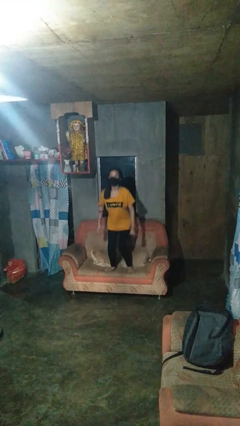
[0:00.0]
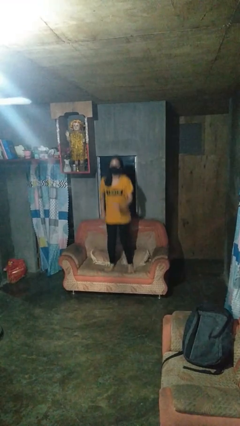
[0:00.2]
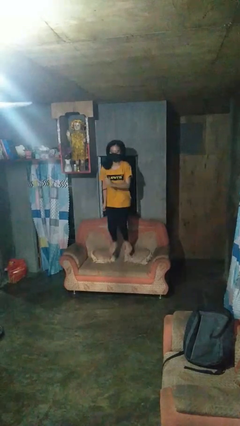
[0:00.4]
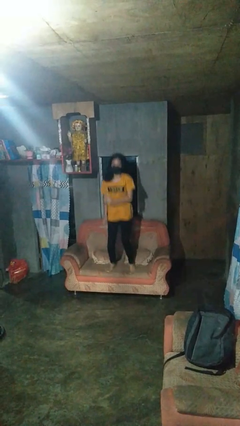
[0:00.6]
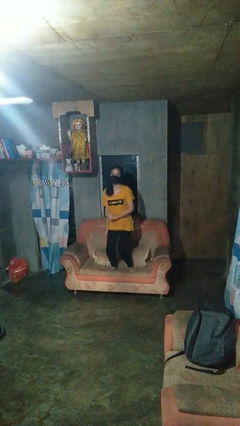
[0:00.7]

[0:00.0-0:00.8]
person jumps on couch

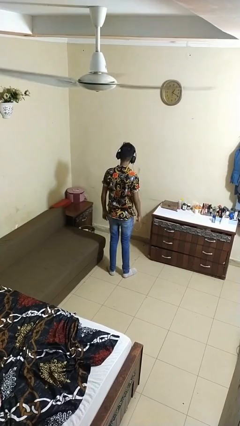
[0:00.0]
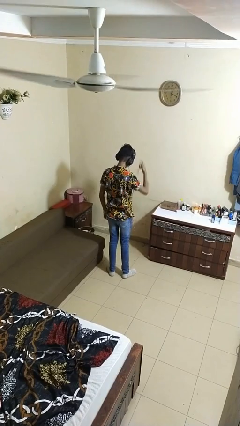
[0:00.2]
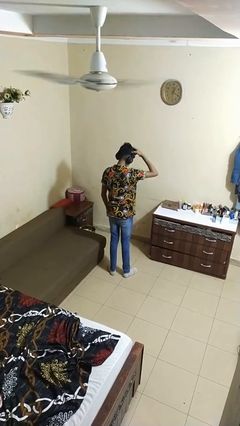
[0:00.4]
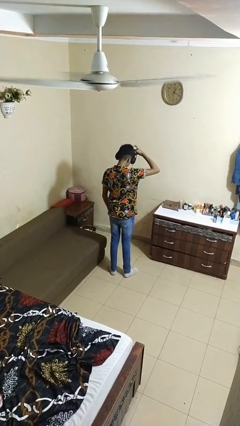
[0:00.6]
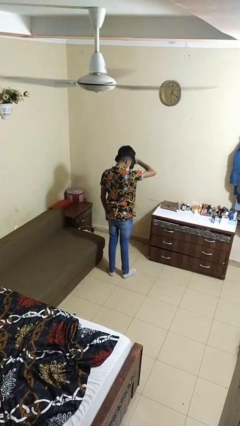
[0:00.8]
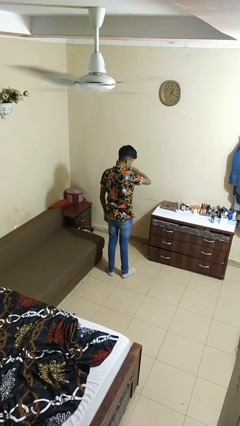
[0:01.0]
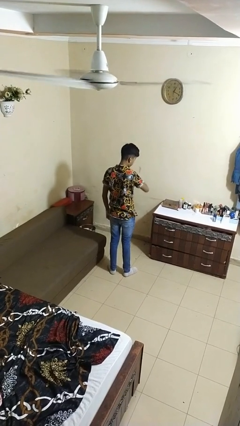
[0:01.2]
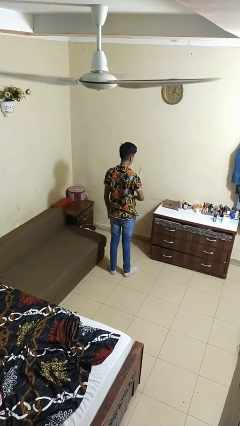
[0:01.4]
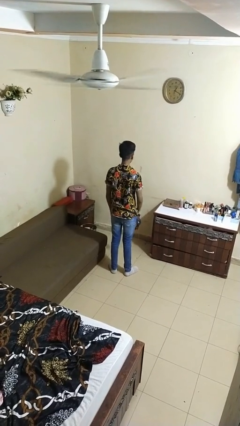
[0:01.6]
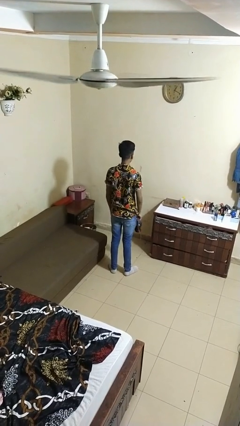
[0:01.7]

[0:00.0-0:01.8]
person takes off headphones

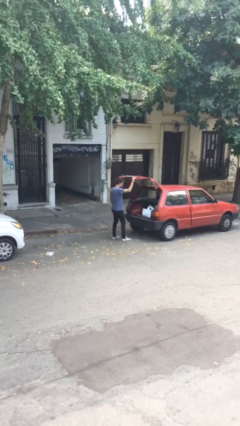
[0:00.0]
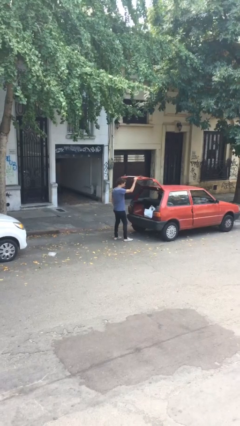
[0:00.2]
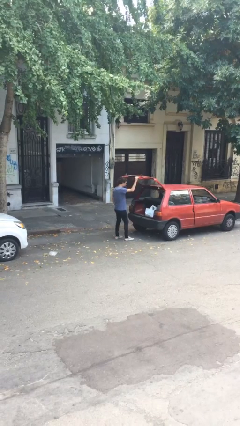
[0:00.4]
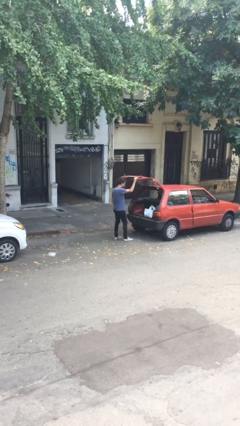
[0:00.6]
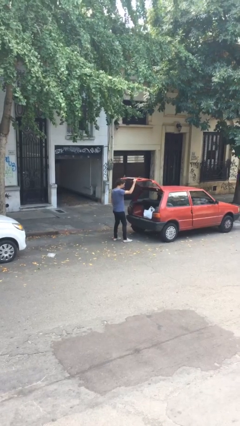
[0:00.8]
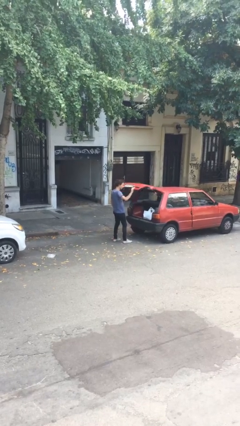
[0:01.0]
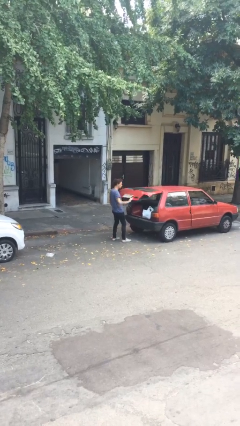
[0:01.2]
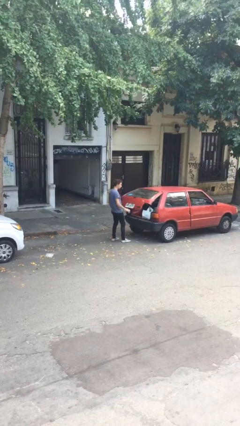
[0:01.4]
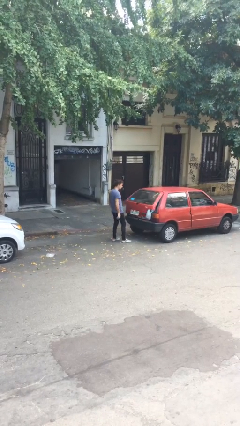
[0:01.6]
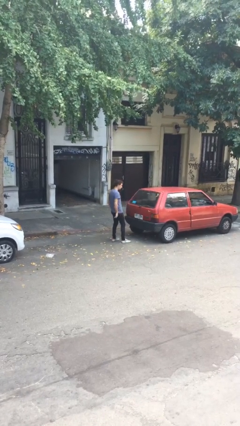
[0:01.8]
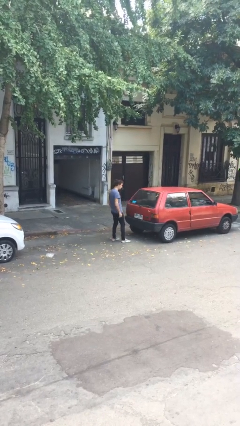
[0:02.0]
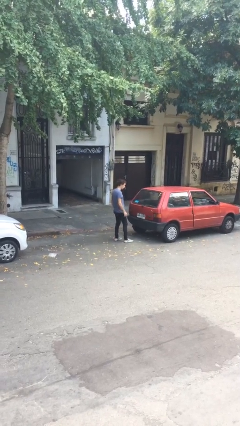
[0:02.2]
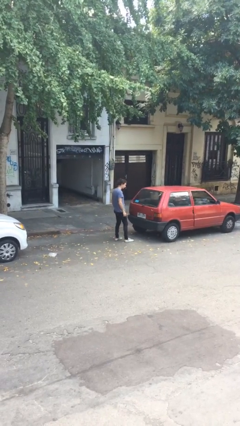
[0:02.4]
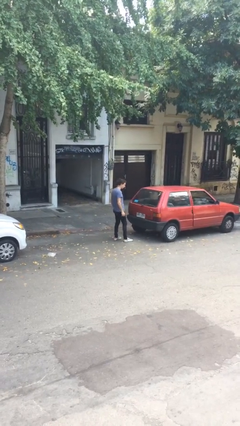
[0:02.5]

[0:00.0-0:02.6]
person closes car trunk

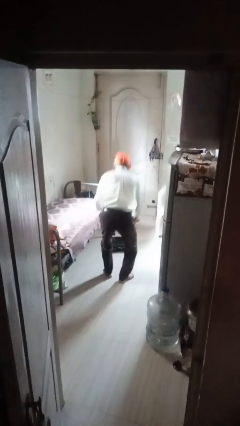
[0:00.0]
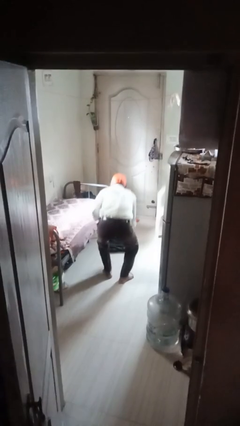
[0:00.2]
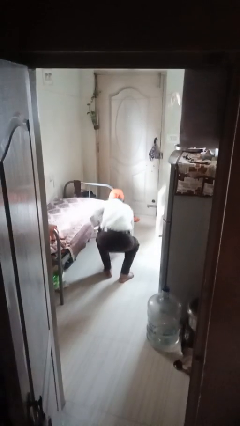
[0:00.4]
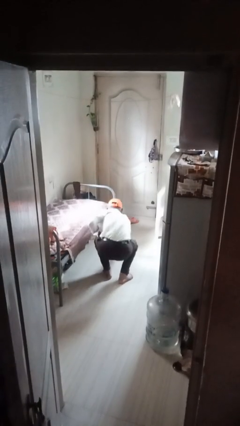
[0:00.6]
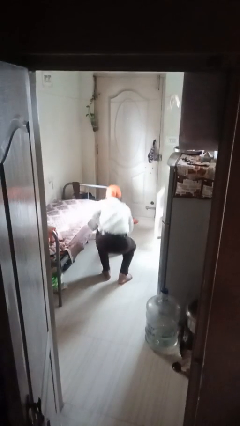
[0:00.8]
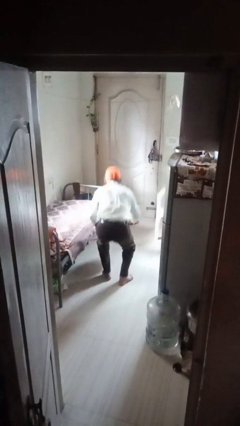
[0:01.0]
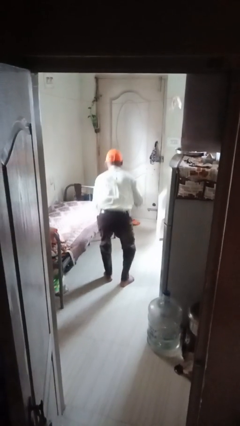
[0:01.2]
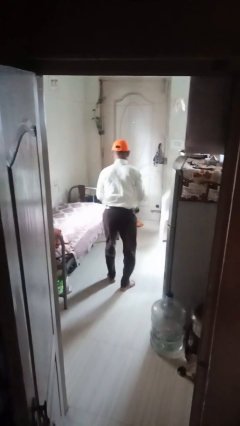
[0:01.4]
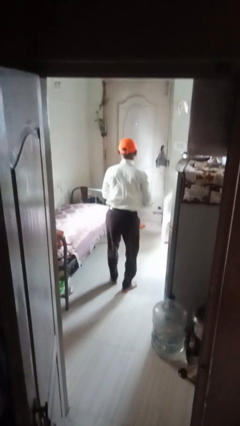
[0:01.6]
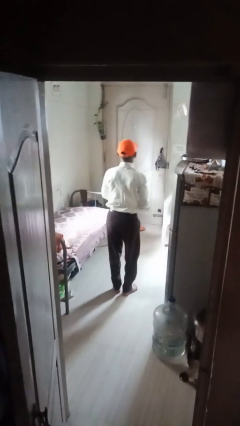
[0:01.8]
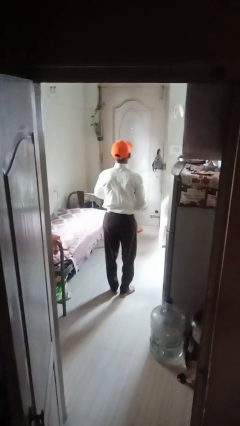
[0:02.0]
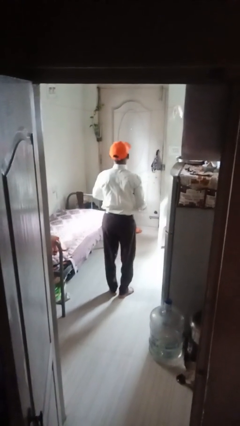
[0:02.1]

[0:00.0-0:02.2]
person picks up object from floor

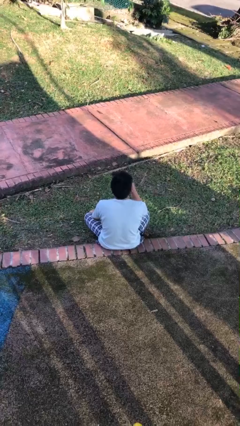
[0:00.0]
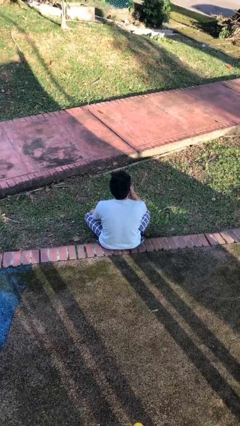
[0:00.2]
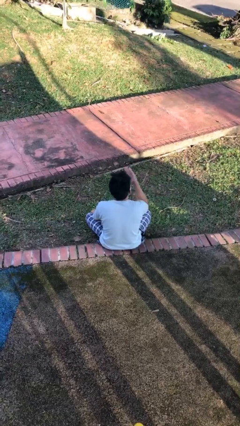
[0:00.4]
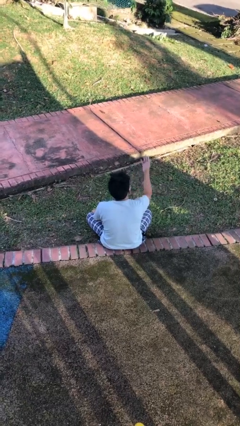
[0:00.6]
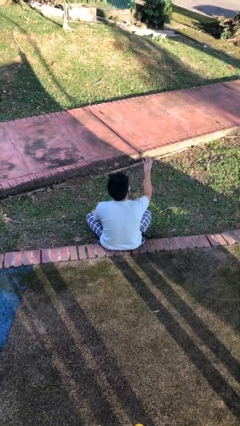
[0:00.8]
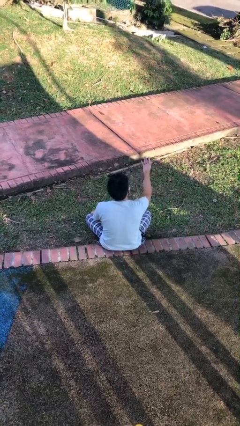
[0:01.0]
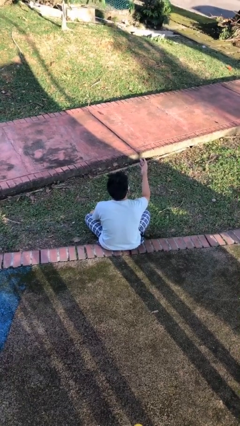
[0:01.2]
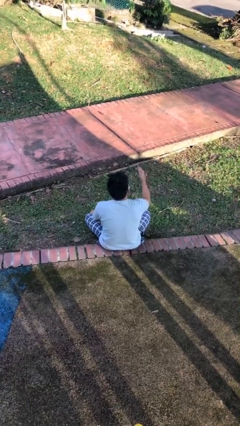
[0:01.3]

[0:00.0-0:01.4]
person gestures blow kiss

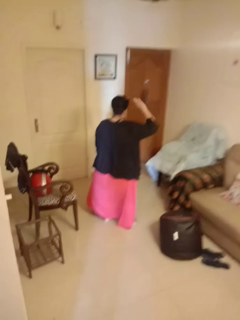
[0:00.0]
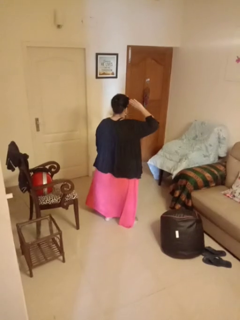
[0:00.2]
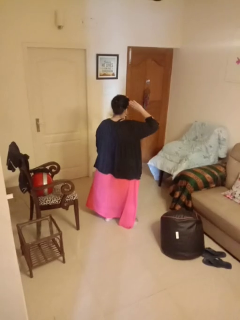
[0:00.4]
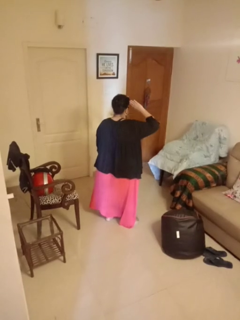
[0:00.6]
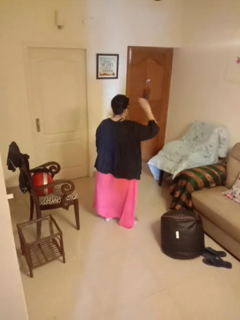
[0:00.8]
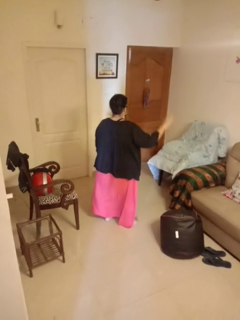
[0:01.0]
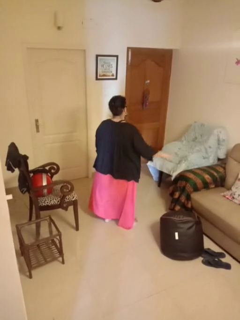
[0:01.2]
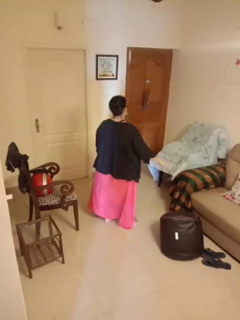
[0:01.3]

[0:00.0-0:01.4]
person salutes

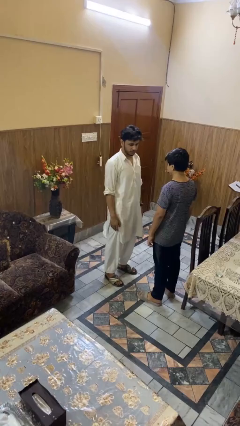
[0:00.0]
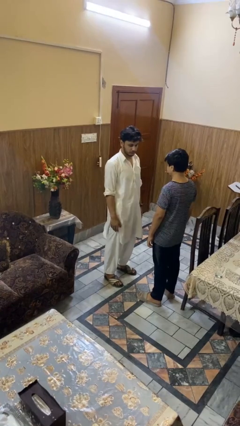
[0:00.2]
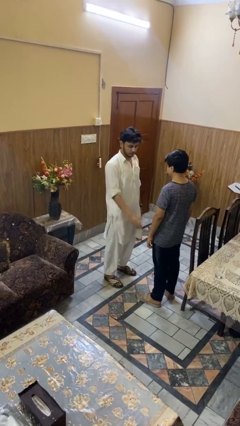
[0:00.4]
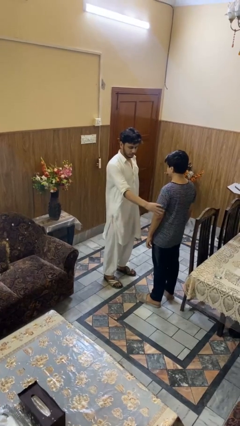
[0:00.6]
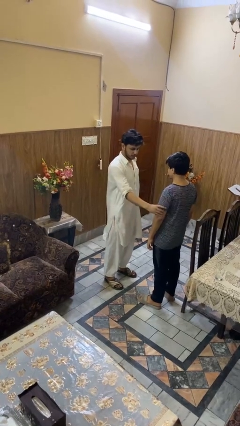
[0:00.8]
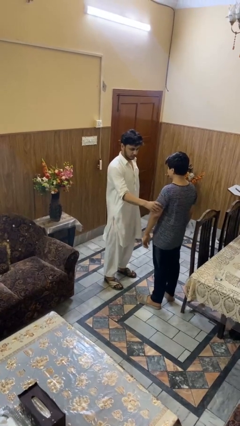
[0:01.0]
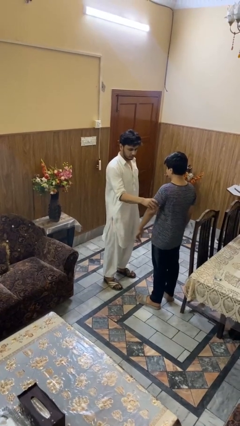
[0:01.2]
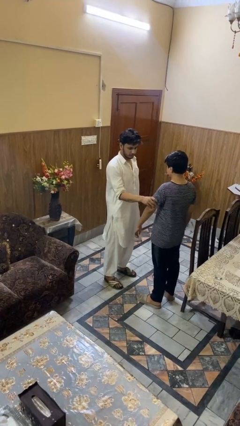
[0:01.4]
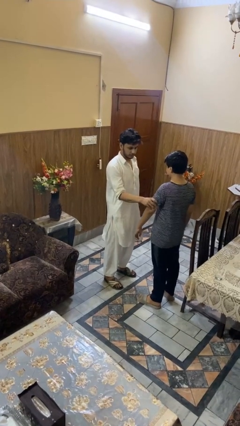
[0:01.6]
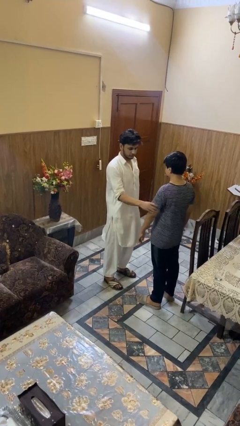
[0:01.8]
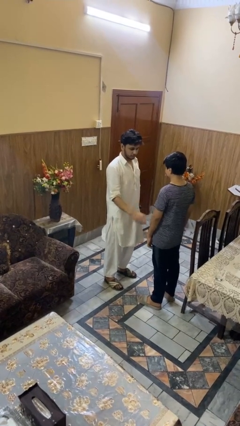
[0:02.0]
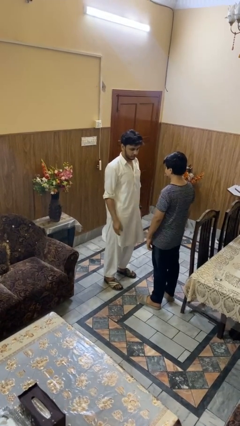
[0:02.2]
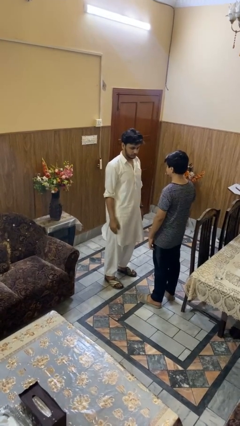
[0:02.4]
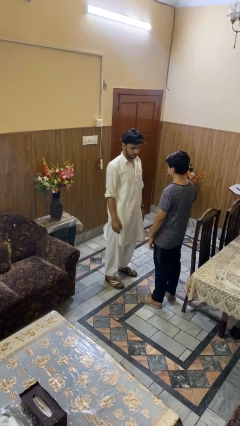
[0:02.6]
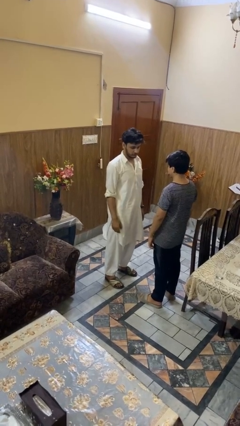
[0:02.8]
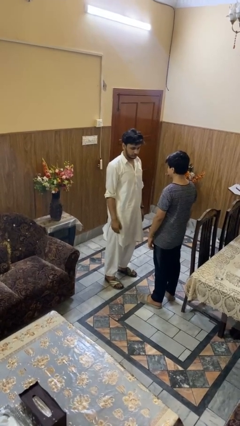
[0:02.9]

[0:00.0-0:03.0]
person grabs person by bicep

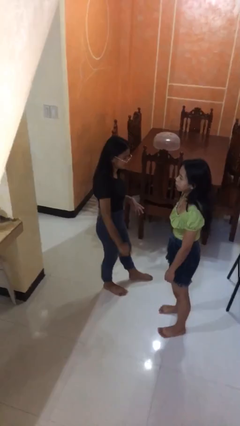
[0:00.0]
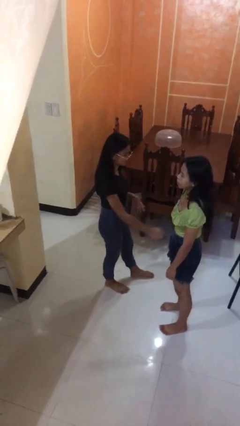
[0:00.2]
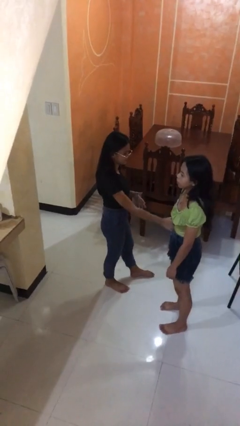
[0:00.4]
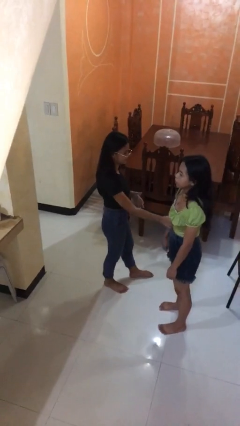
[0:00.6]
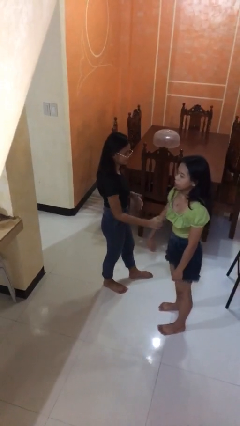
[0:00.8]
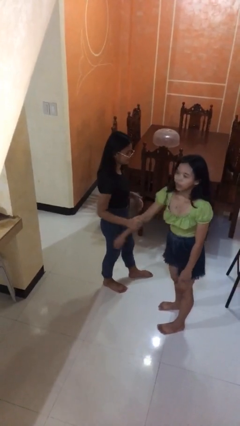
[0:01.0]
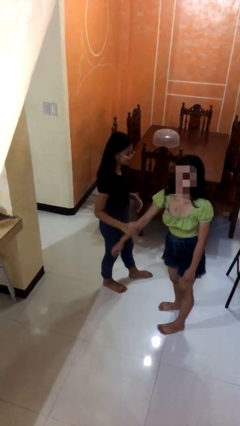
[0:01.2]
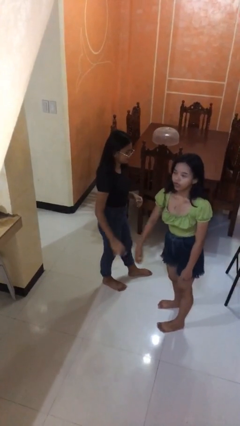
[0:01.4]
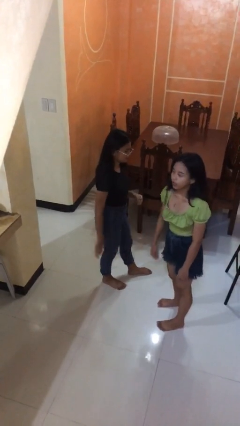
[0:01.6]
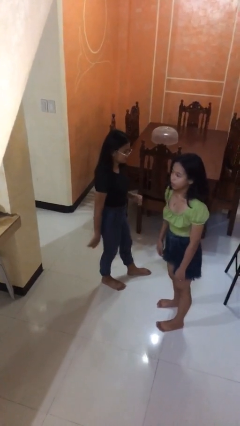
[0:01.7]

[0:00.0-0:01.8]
person grabs person by forearm

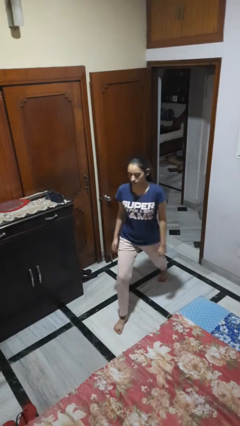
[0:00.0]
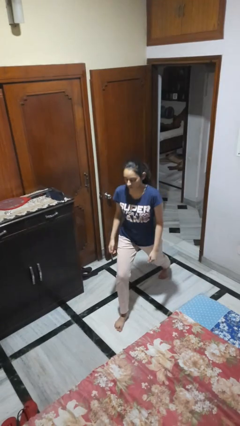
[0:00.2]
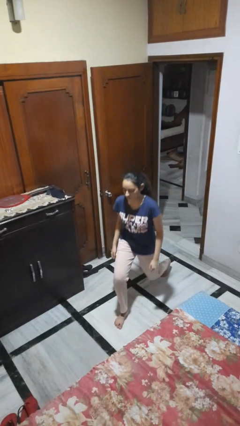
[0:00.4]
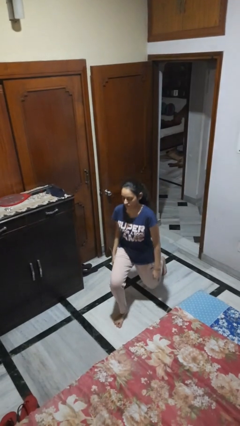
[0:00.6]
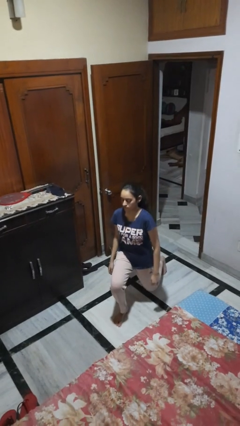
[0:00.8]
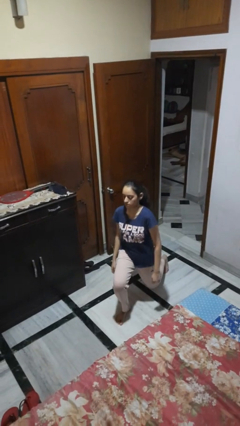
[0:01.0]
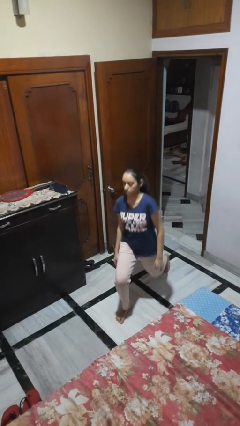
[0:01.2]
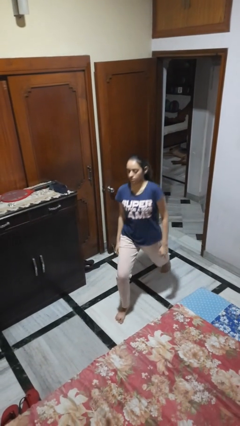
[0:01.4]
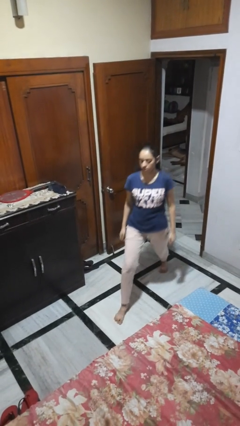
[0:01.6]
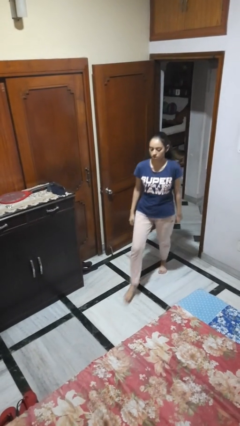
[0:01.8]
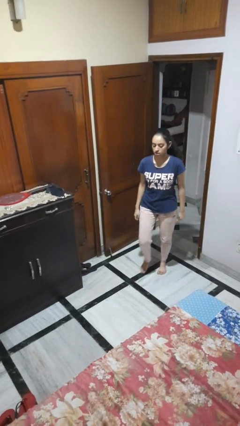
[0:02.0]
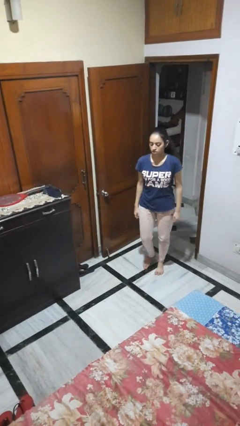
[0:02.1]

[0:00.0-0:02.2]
person exercises with lunges
